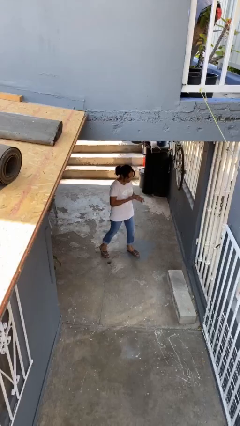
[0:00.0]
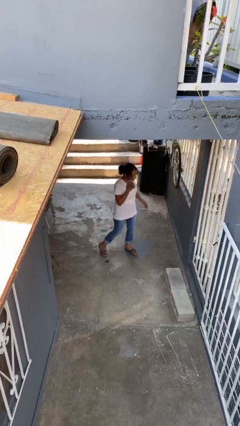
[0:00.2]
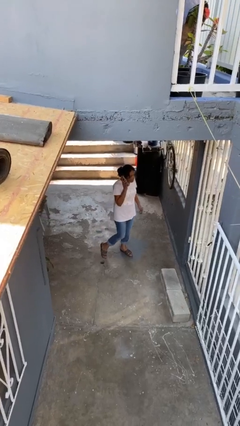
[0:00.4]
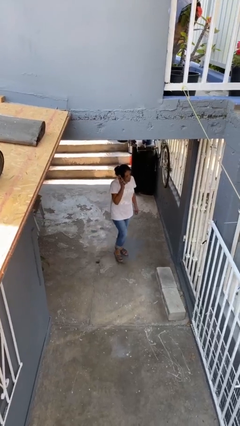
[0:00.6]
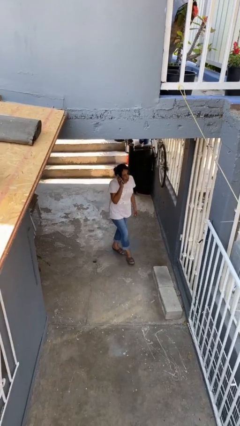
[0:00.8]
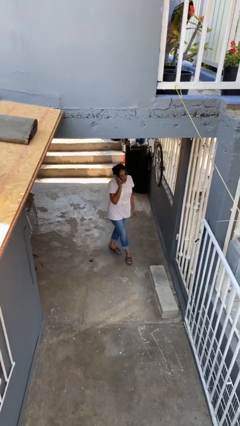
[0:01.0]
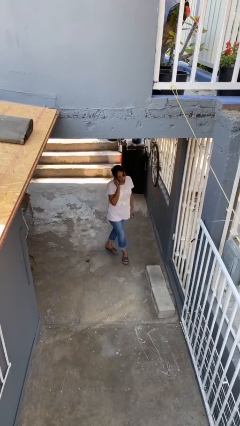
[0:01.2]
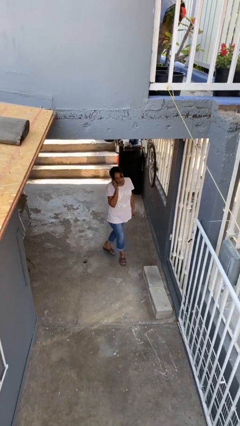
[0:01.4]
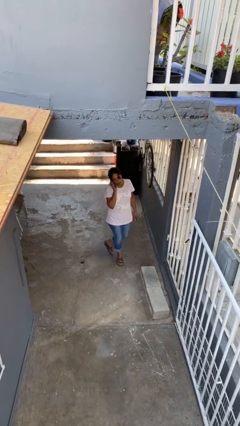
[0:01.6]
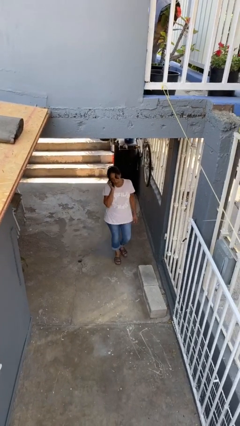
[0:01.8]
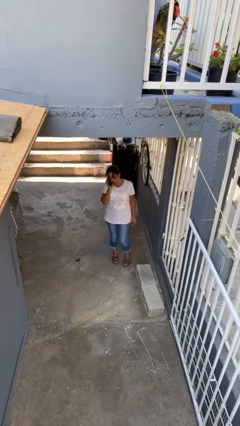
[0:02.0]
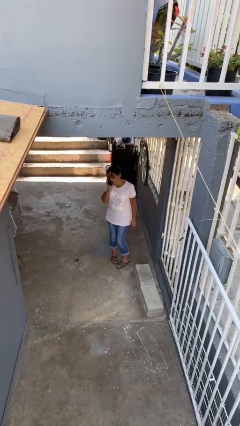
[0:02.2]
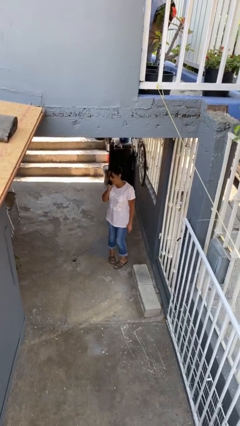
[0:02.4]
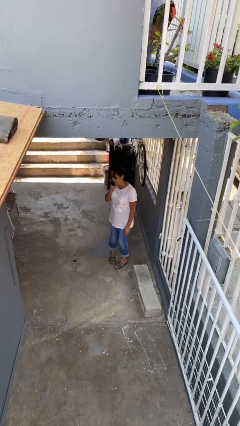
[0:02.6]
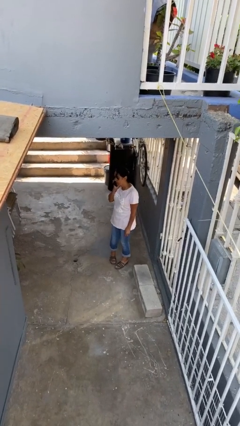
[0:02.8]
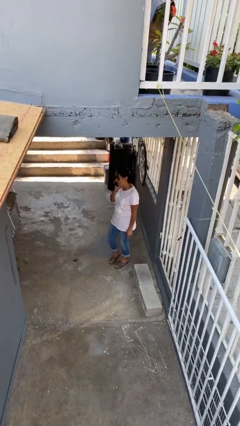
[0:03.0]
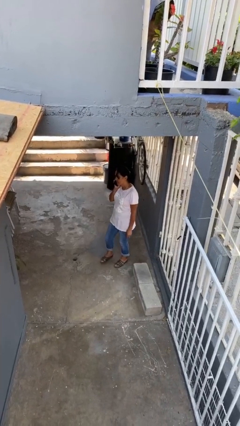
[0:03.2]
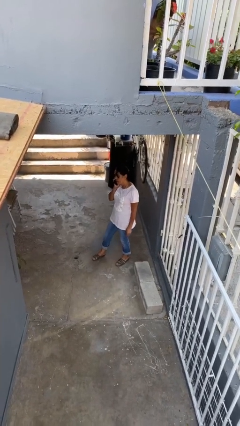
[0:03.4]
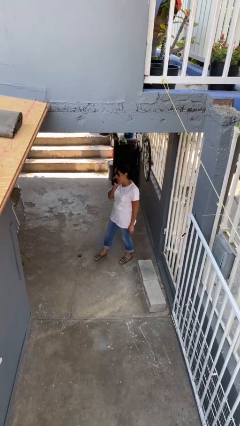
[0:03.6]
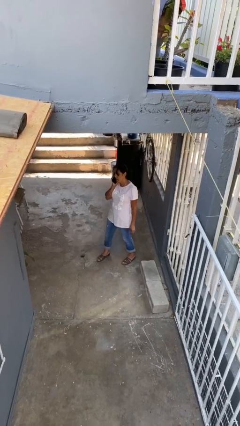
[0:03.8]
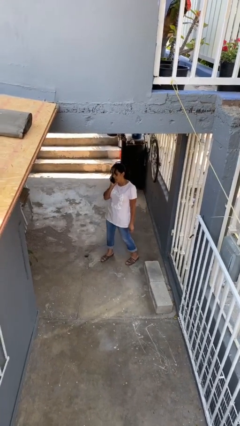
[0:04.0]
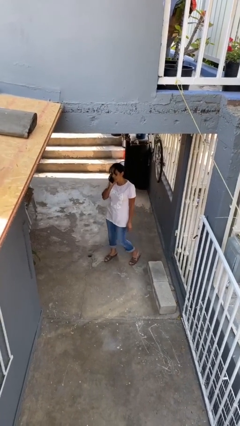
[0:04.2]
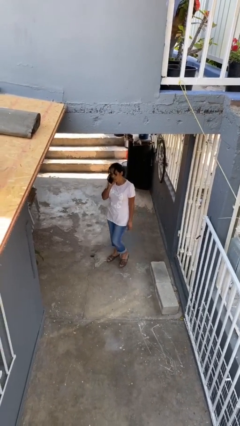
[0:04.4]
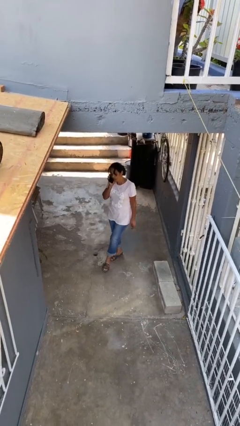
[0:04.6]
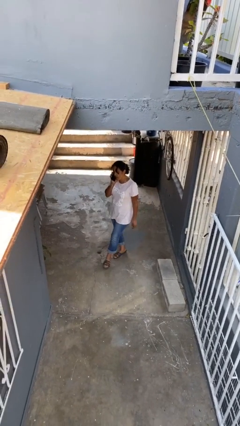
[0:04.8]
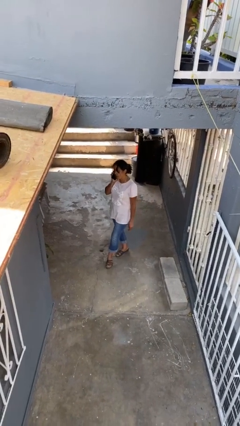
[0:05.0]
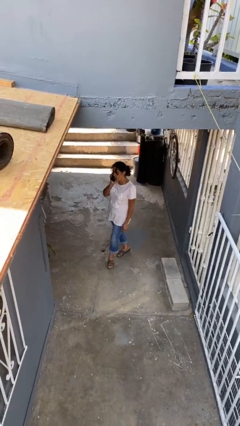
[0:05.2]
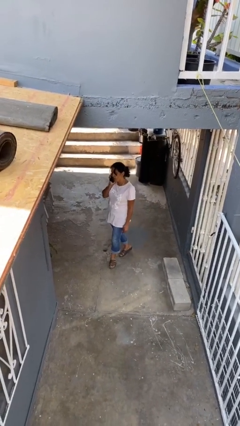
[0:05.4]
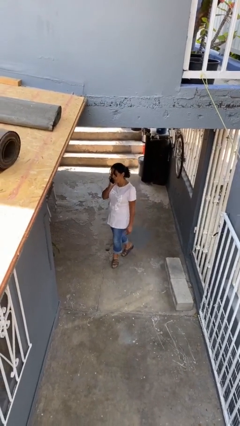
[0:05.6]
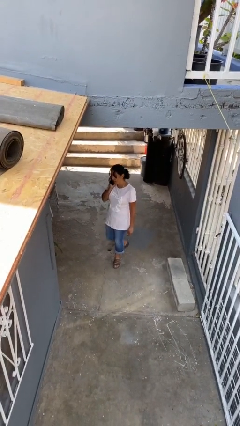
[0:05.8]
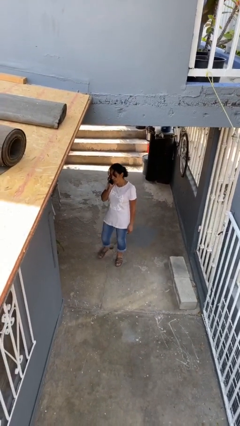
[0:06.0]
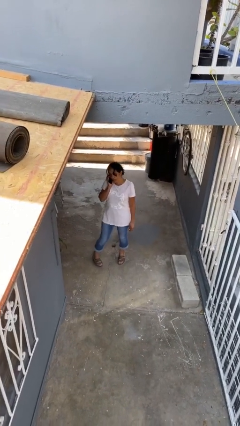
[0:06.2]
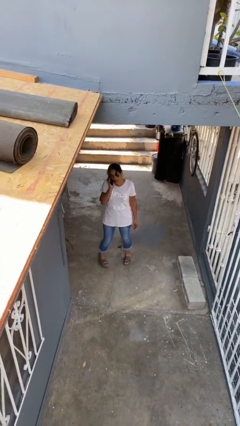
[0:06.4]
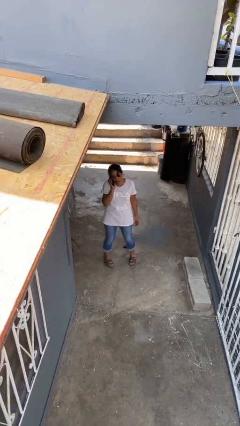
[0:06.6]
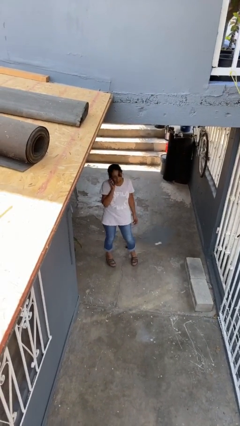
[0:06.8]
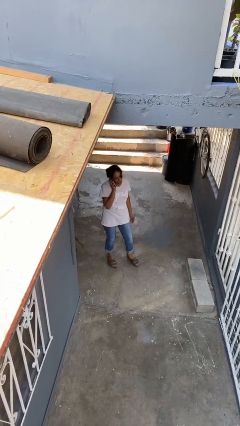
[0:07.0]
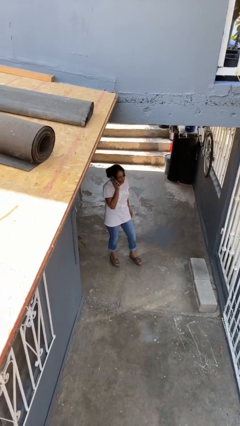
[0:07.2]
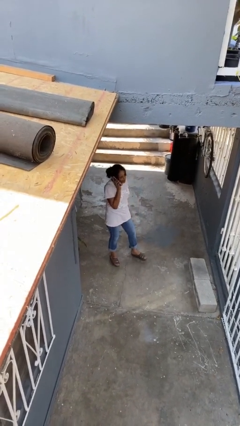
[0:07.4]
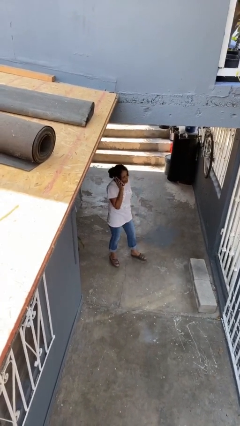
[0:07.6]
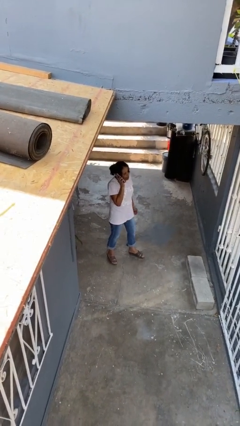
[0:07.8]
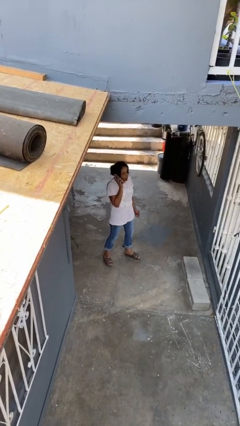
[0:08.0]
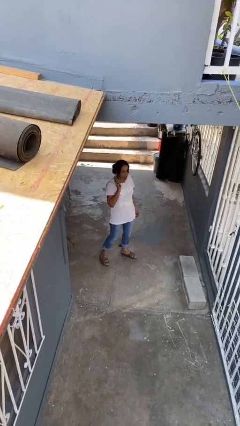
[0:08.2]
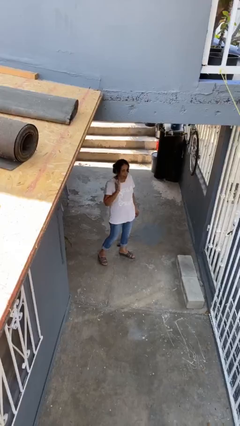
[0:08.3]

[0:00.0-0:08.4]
person talks on phone

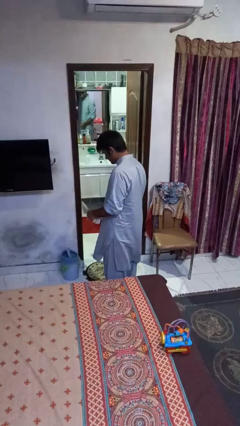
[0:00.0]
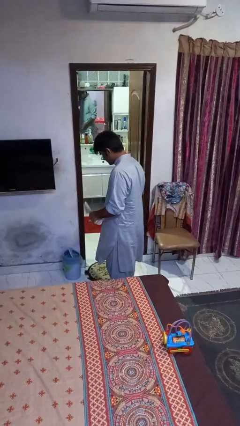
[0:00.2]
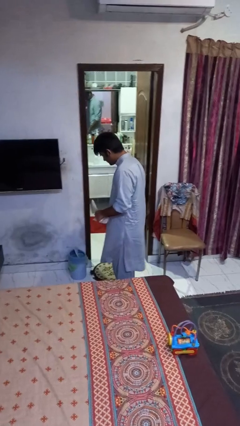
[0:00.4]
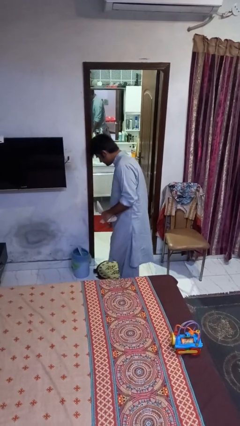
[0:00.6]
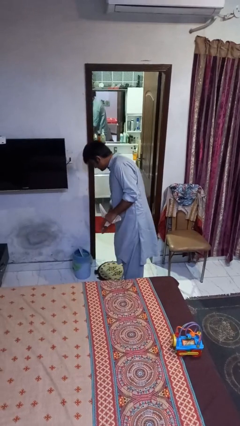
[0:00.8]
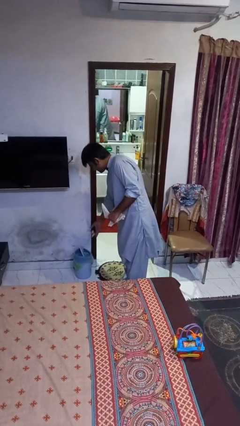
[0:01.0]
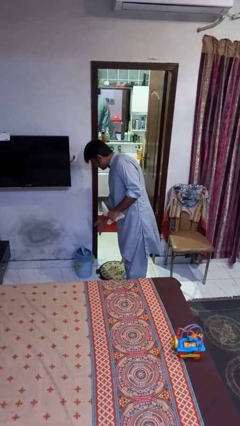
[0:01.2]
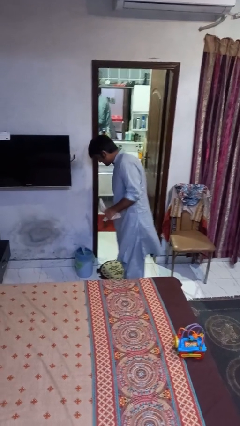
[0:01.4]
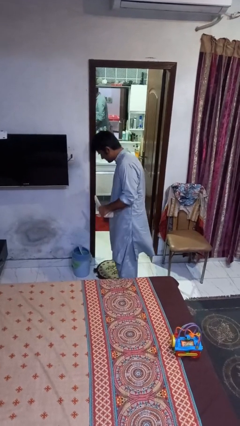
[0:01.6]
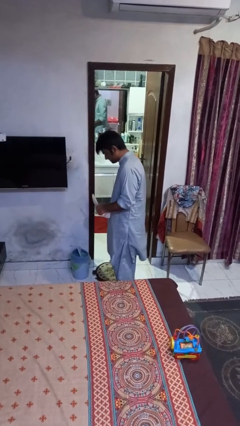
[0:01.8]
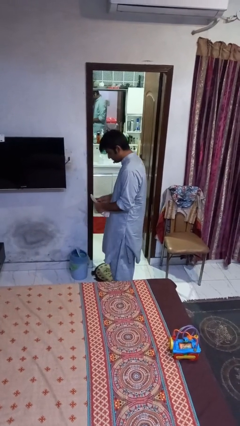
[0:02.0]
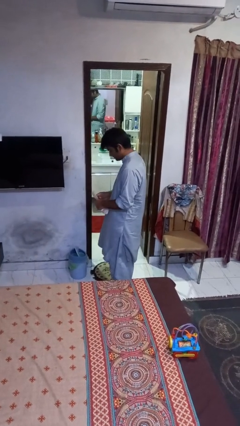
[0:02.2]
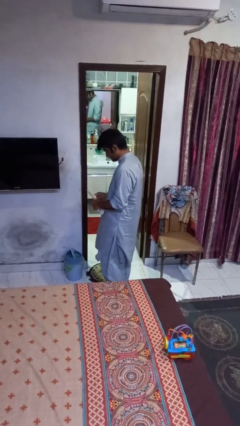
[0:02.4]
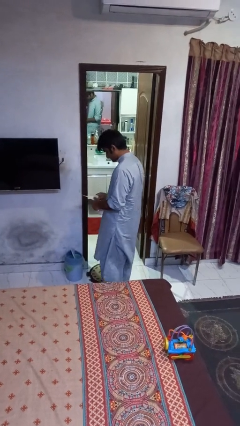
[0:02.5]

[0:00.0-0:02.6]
person discards trash

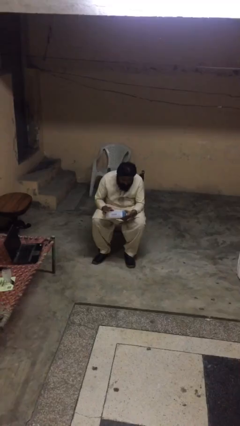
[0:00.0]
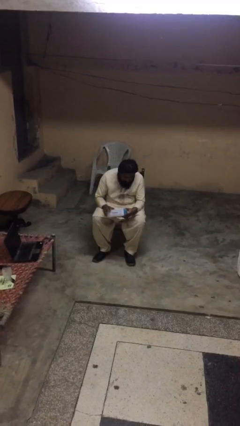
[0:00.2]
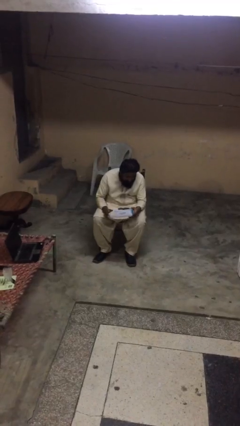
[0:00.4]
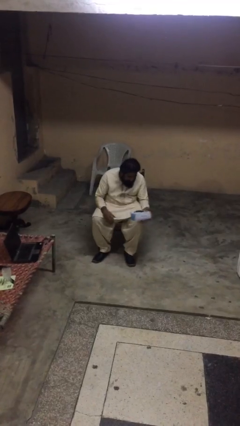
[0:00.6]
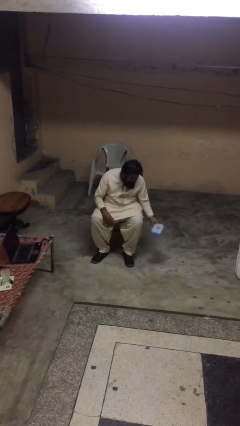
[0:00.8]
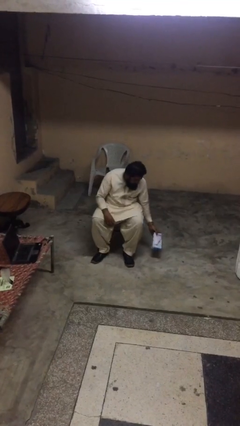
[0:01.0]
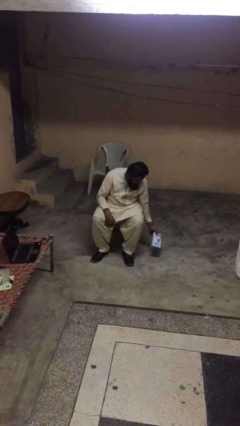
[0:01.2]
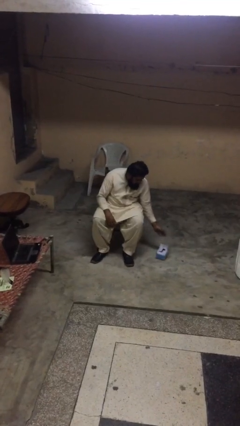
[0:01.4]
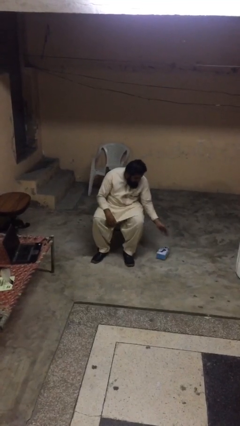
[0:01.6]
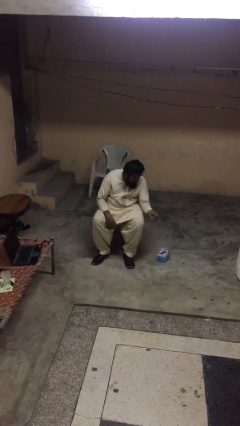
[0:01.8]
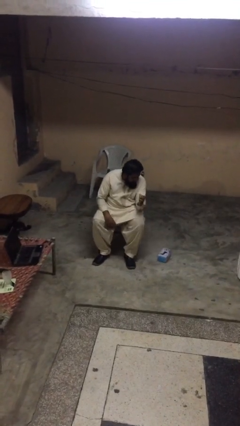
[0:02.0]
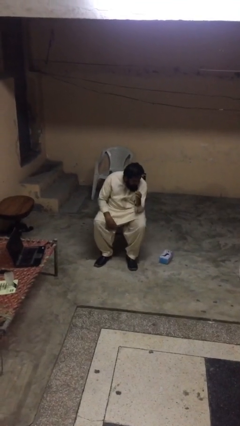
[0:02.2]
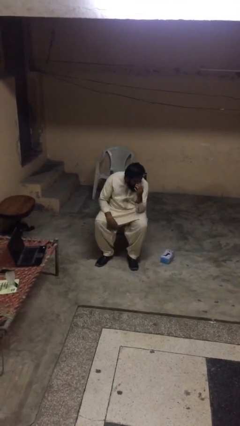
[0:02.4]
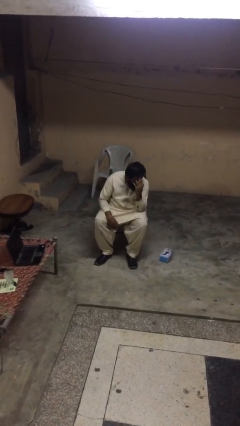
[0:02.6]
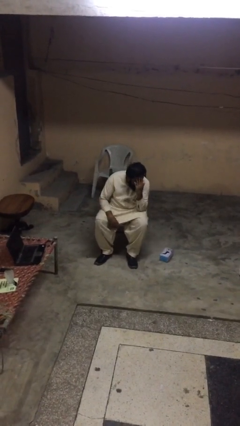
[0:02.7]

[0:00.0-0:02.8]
person puts down object on floor

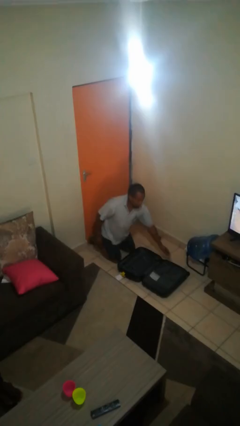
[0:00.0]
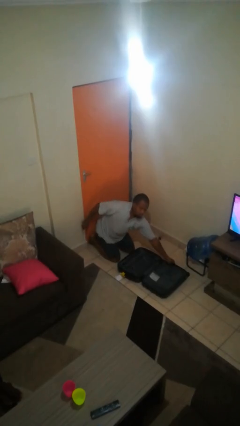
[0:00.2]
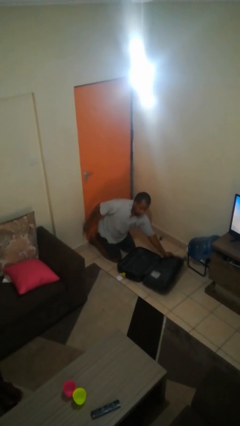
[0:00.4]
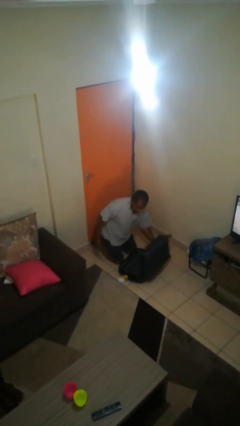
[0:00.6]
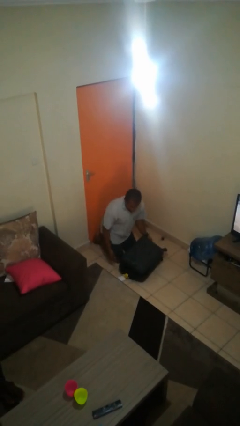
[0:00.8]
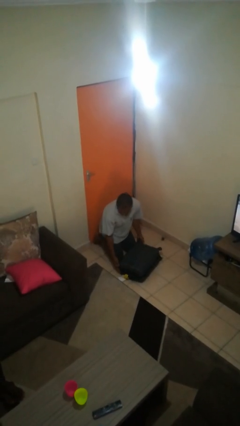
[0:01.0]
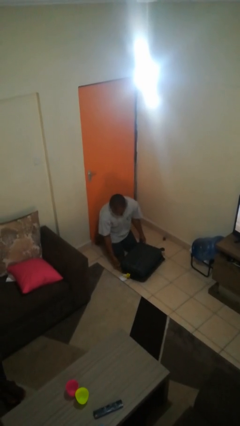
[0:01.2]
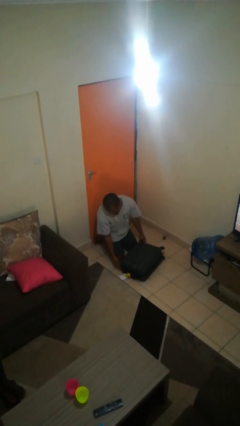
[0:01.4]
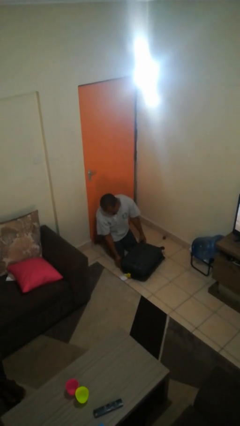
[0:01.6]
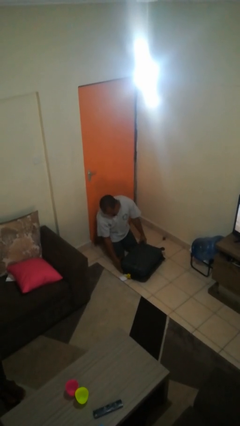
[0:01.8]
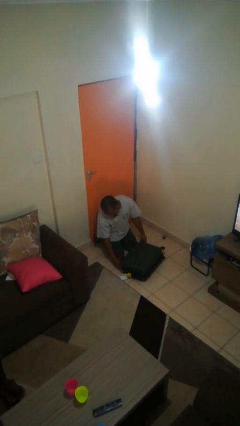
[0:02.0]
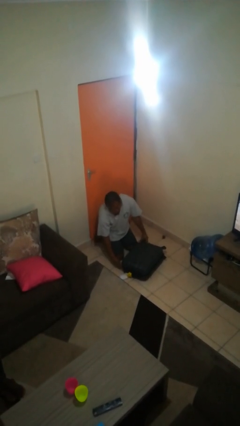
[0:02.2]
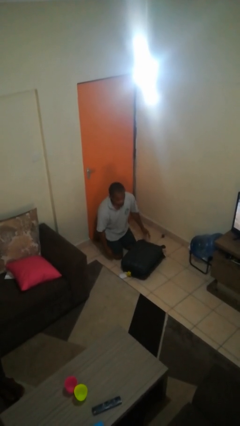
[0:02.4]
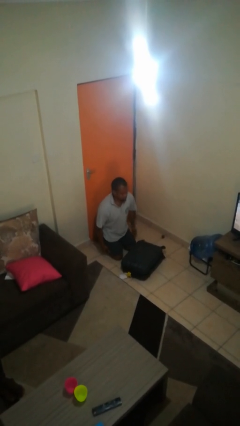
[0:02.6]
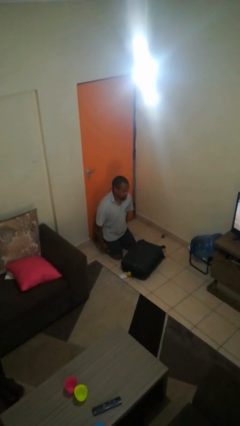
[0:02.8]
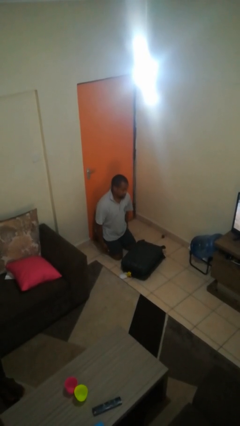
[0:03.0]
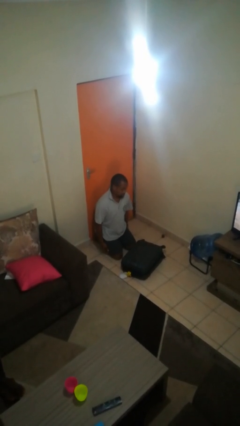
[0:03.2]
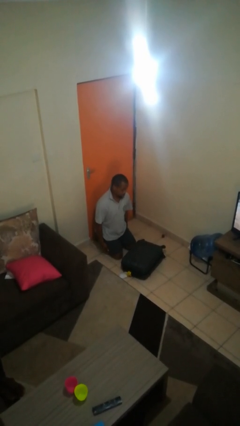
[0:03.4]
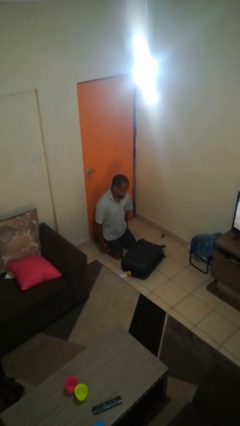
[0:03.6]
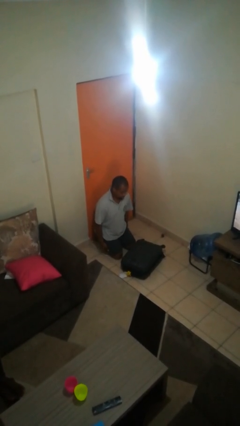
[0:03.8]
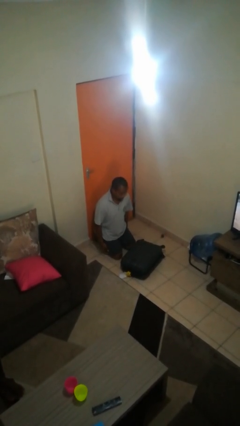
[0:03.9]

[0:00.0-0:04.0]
person closes suitcase
